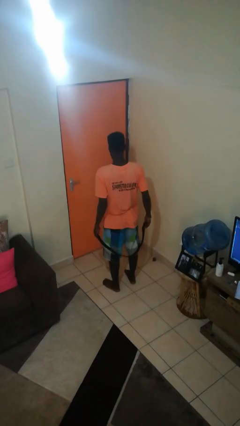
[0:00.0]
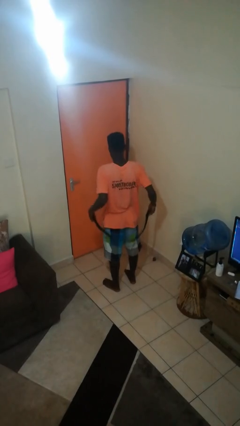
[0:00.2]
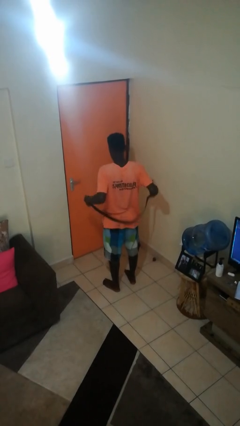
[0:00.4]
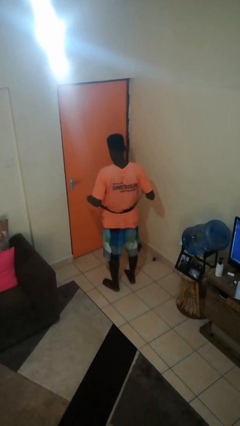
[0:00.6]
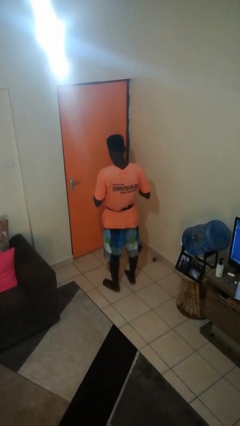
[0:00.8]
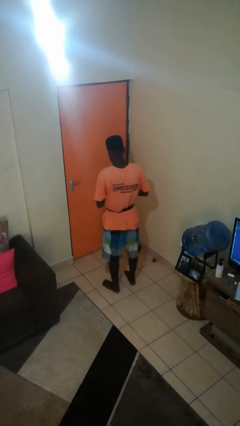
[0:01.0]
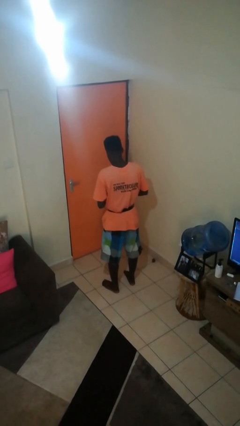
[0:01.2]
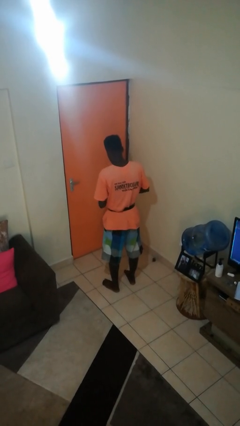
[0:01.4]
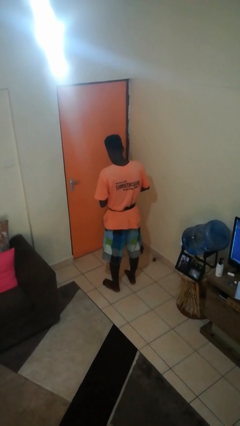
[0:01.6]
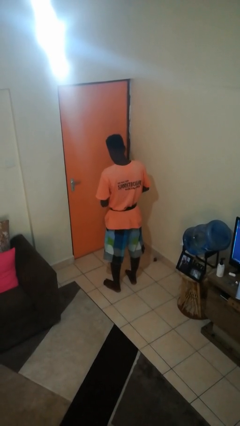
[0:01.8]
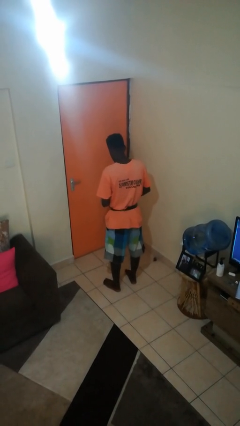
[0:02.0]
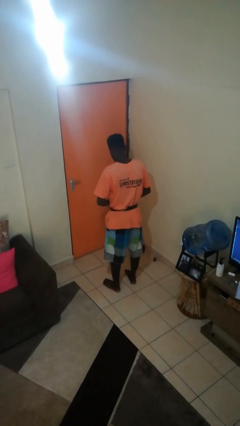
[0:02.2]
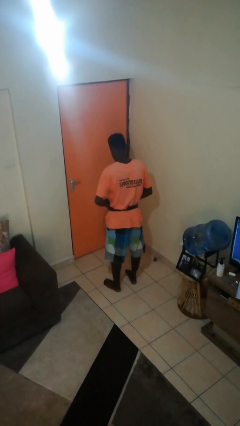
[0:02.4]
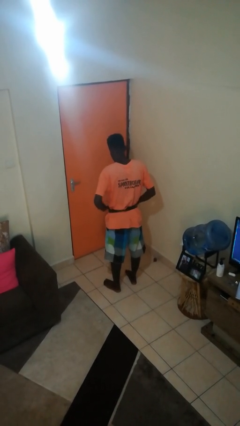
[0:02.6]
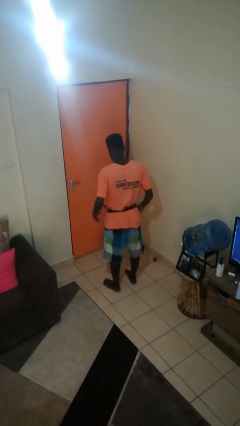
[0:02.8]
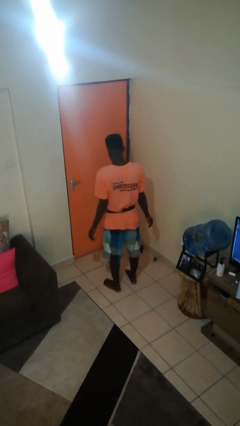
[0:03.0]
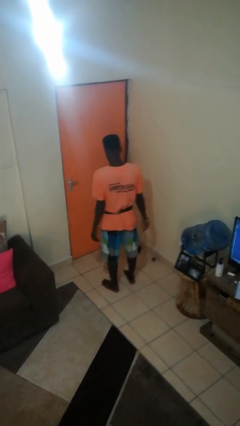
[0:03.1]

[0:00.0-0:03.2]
person puts on belt

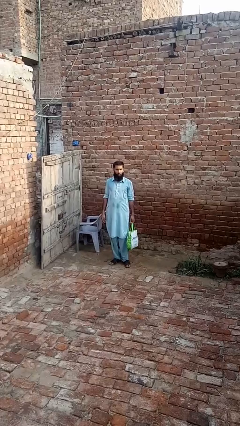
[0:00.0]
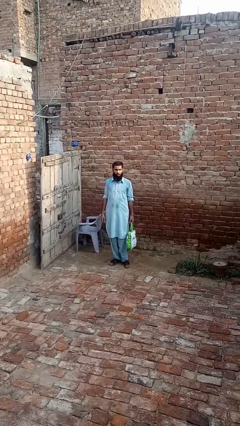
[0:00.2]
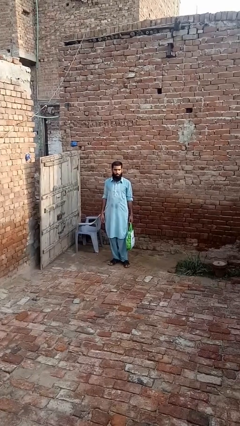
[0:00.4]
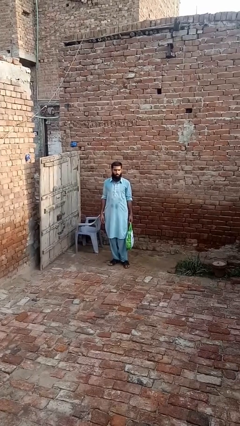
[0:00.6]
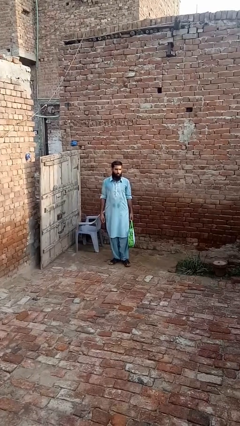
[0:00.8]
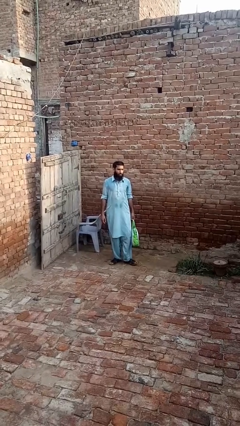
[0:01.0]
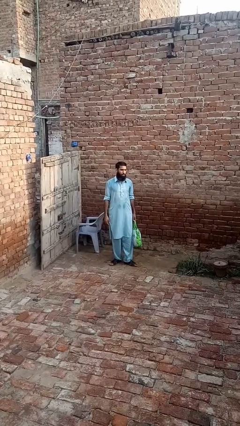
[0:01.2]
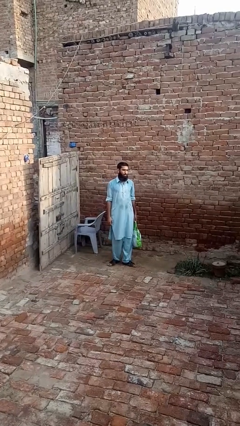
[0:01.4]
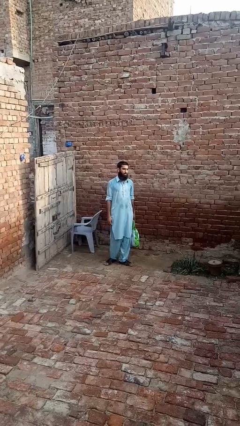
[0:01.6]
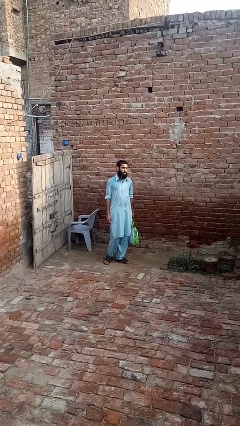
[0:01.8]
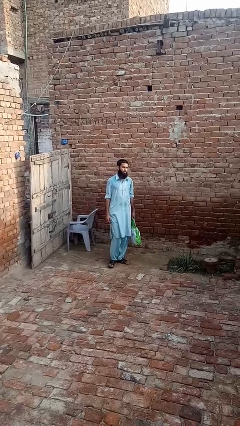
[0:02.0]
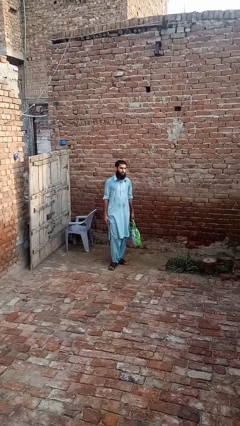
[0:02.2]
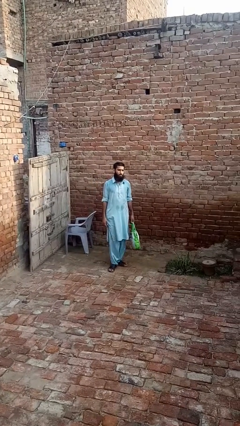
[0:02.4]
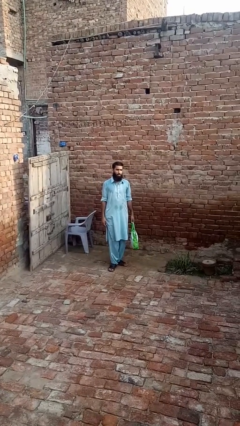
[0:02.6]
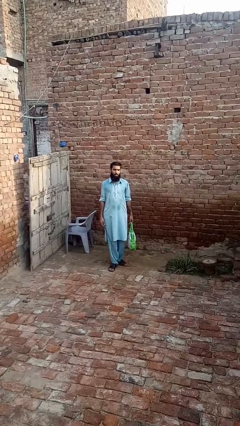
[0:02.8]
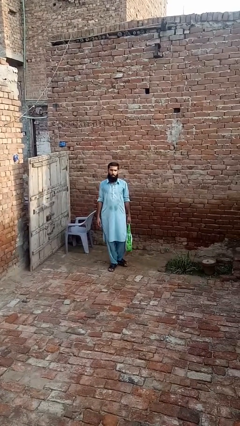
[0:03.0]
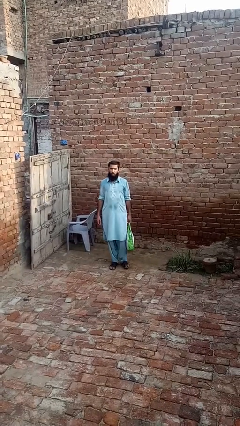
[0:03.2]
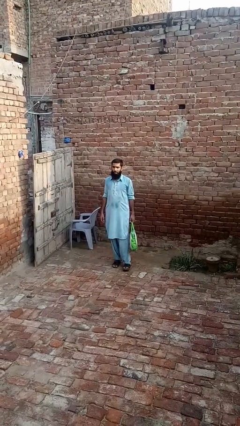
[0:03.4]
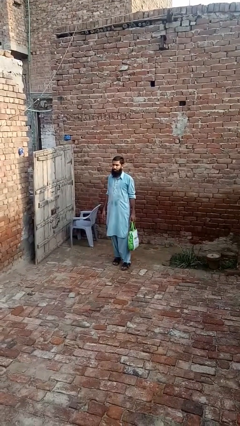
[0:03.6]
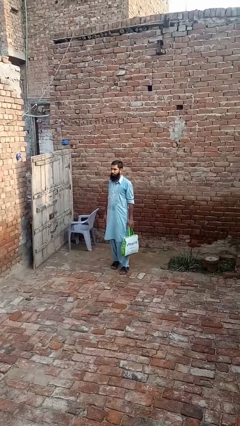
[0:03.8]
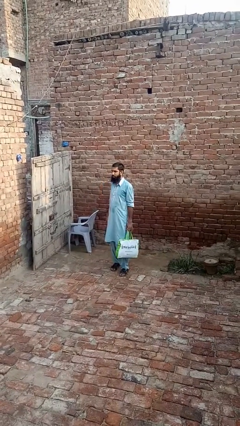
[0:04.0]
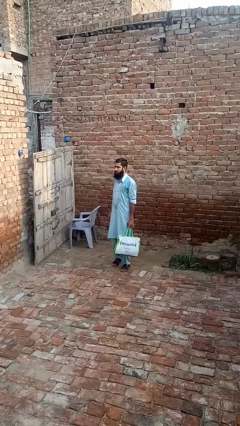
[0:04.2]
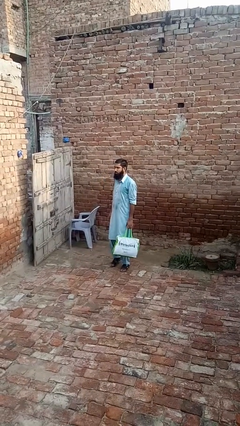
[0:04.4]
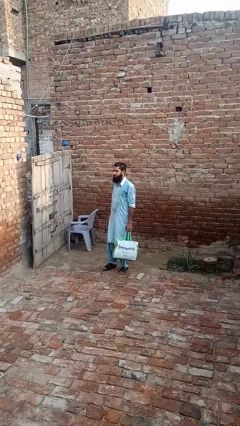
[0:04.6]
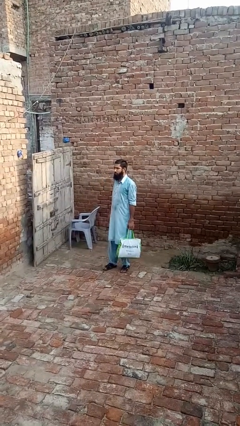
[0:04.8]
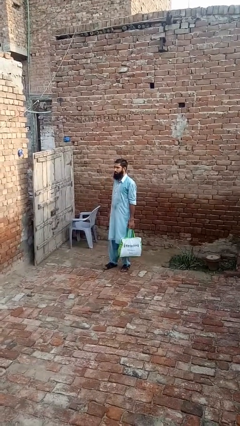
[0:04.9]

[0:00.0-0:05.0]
person carries groceries

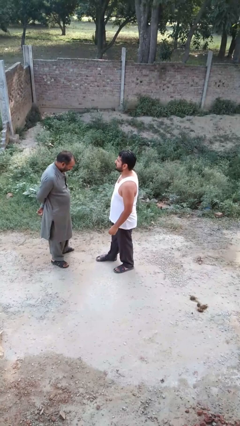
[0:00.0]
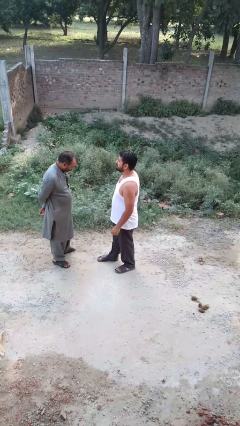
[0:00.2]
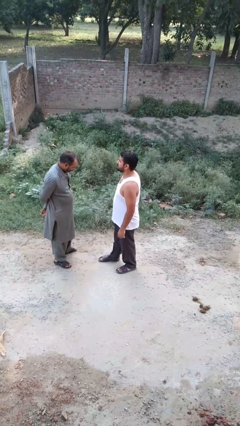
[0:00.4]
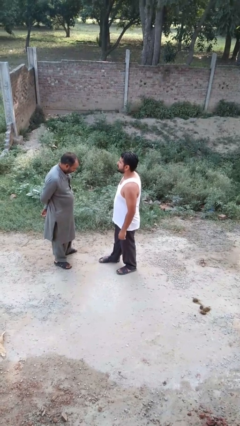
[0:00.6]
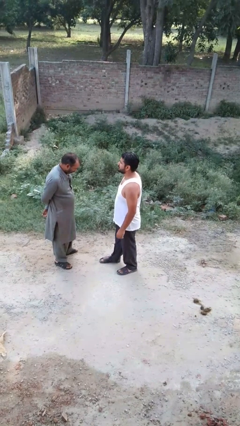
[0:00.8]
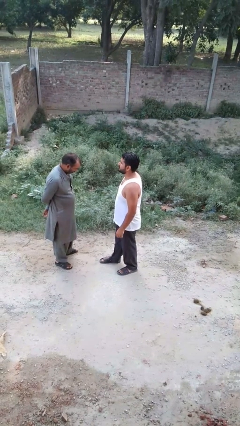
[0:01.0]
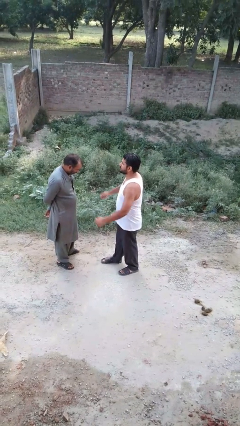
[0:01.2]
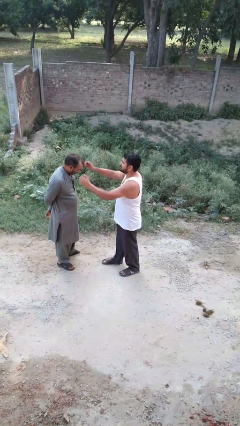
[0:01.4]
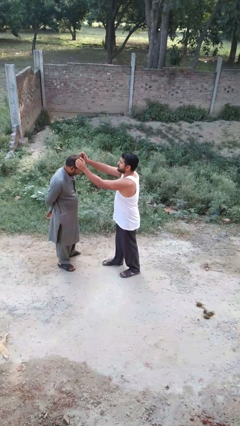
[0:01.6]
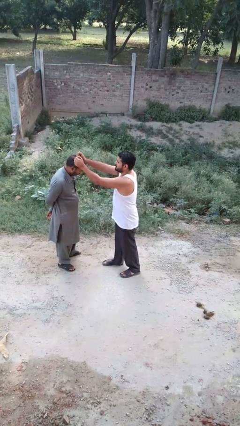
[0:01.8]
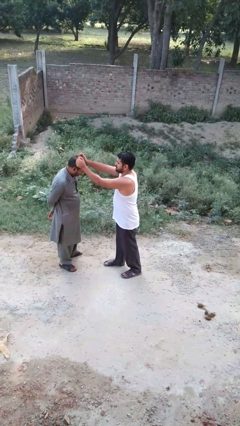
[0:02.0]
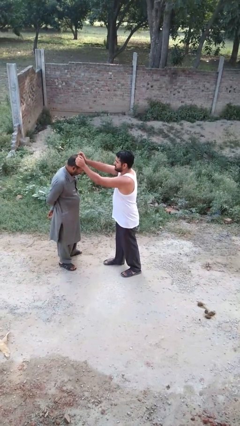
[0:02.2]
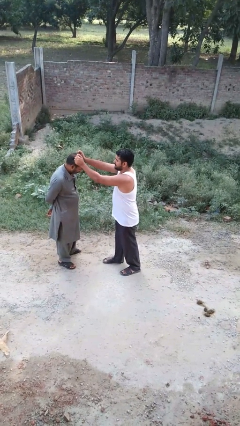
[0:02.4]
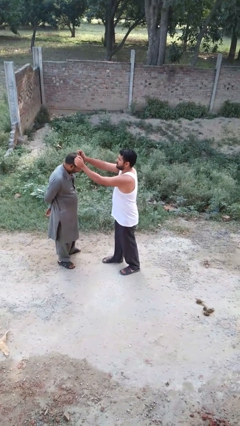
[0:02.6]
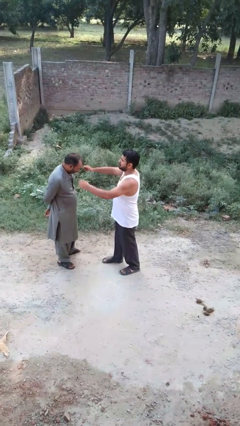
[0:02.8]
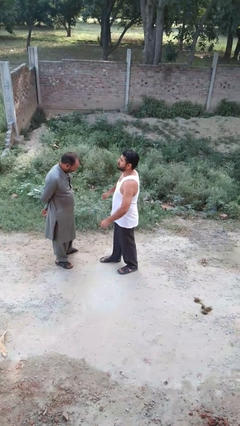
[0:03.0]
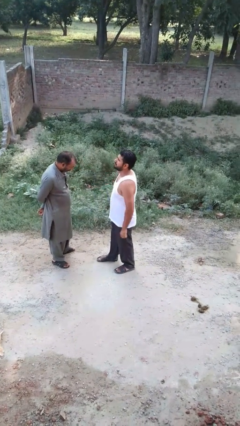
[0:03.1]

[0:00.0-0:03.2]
person grabs person by hair

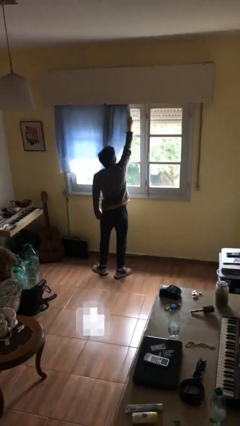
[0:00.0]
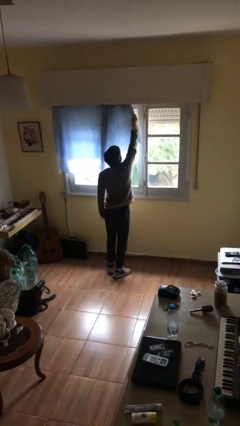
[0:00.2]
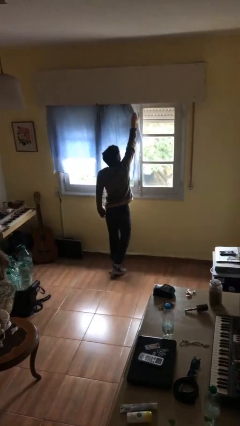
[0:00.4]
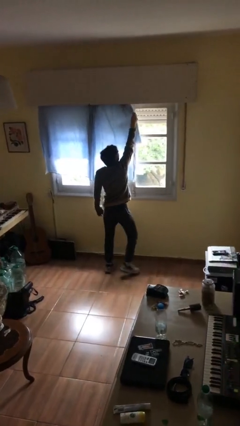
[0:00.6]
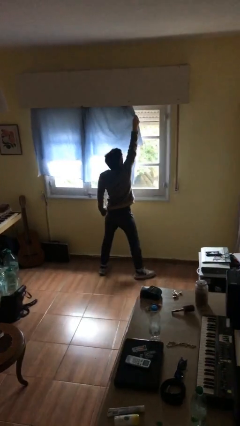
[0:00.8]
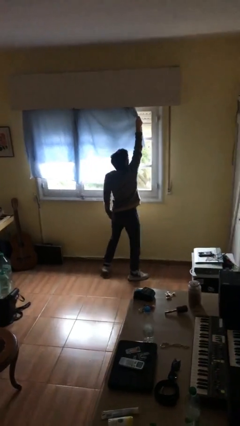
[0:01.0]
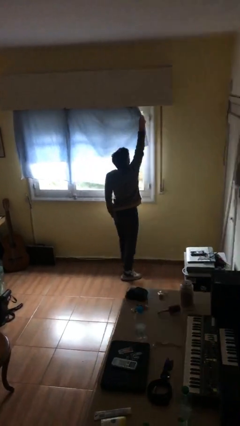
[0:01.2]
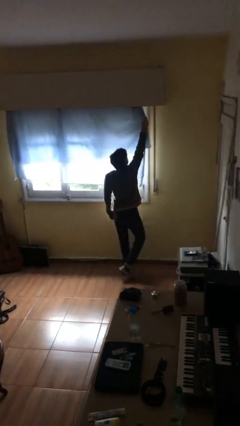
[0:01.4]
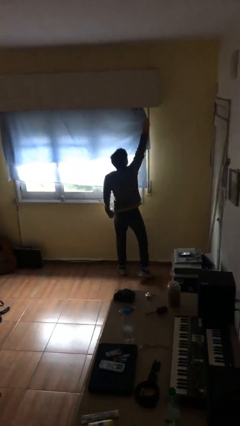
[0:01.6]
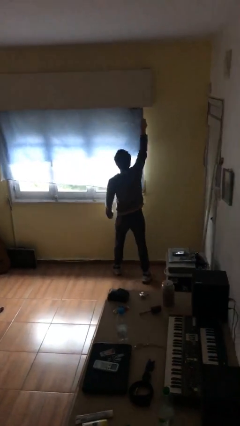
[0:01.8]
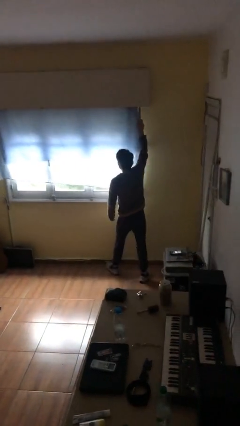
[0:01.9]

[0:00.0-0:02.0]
person closes curtains

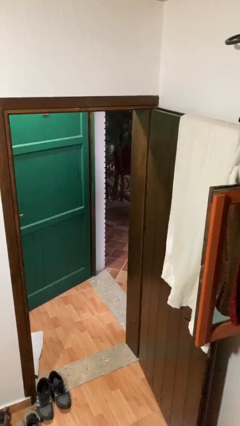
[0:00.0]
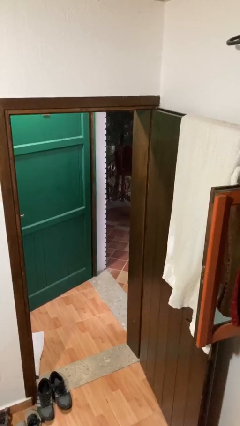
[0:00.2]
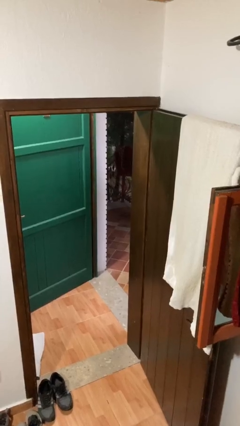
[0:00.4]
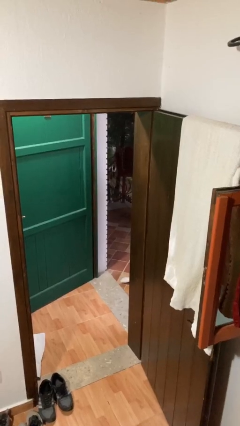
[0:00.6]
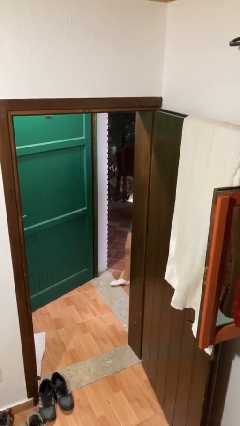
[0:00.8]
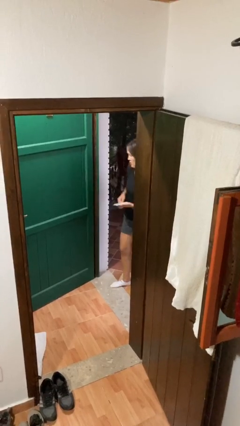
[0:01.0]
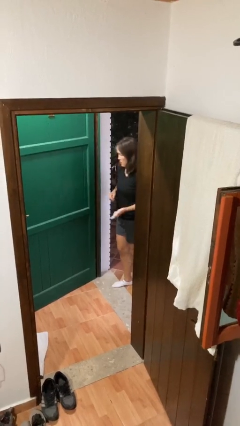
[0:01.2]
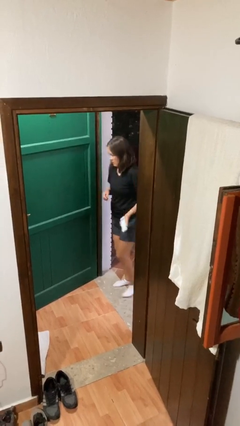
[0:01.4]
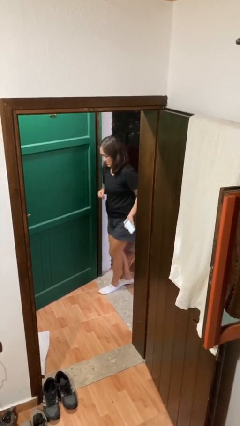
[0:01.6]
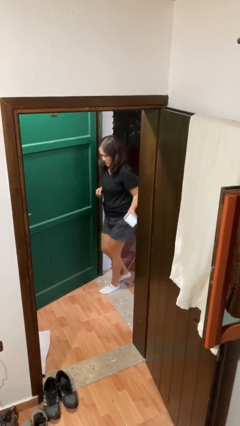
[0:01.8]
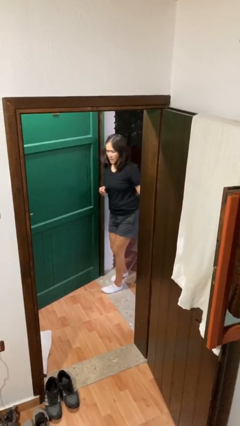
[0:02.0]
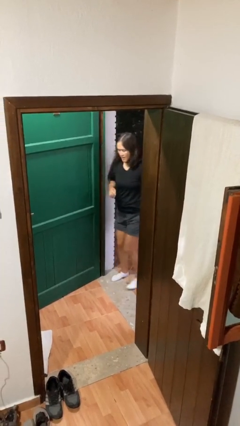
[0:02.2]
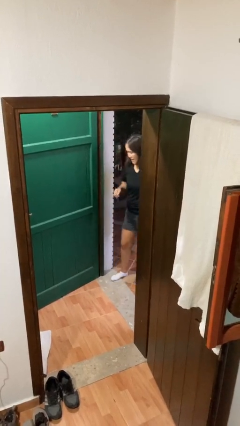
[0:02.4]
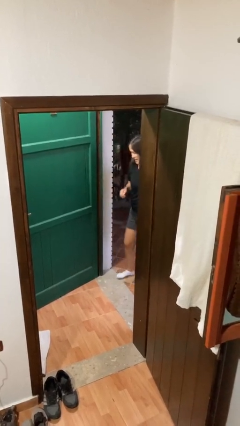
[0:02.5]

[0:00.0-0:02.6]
person bumps into wall

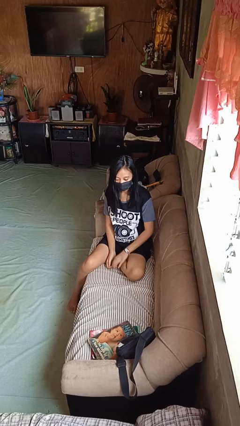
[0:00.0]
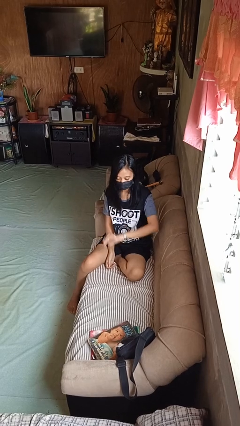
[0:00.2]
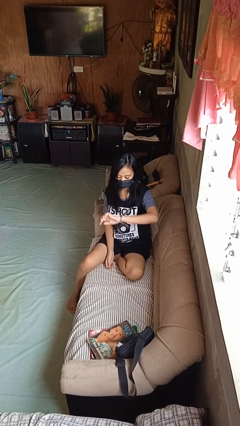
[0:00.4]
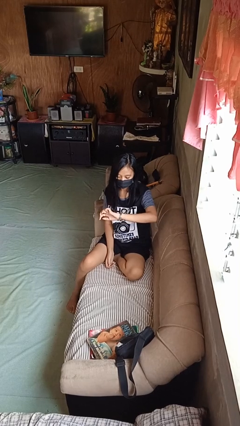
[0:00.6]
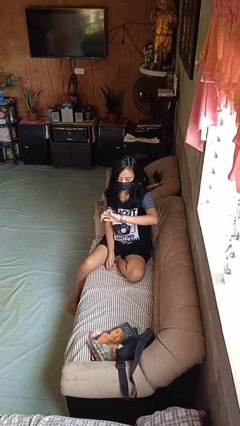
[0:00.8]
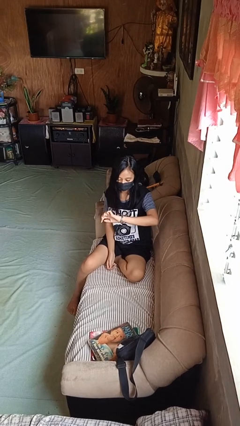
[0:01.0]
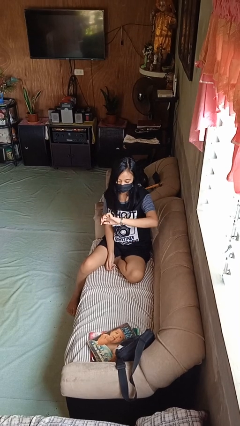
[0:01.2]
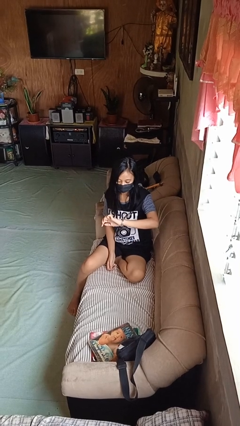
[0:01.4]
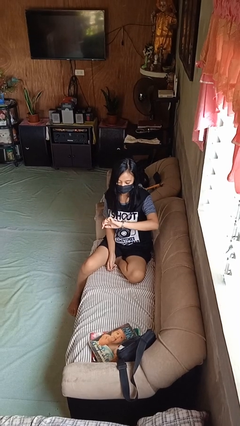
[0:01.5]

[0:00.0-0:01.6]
person looks at wristwatch
